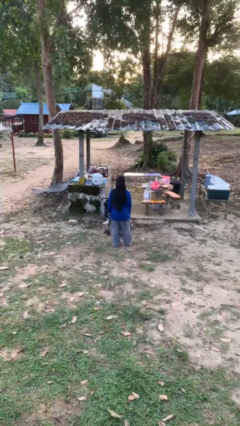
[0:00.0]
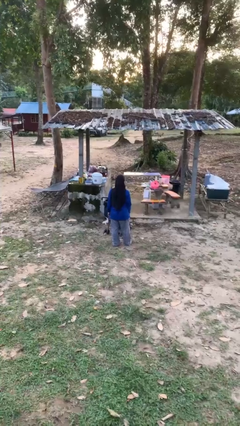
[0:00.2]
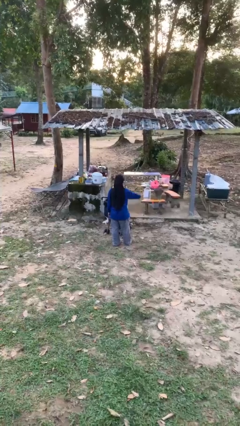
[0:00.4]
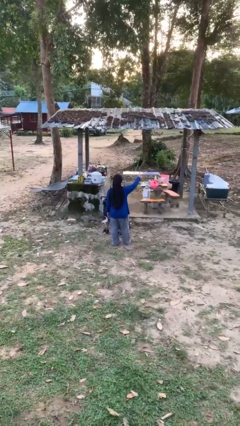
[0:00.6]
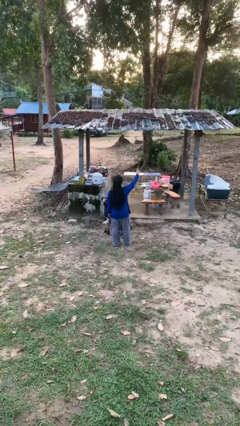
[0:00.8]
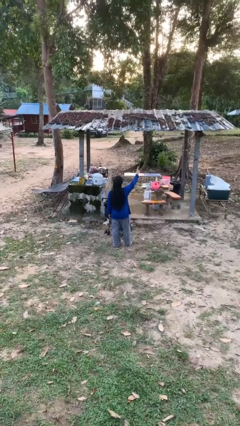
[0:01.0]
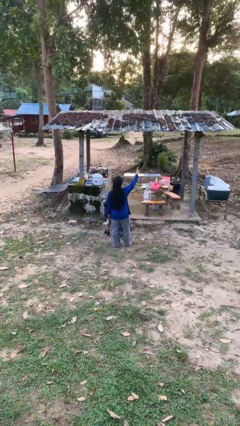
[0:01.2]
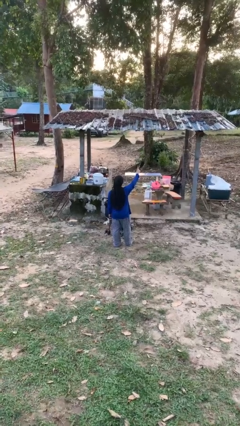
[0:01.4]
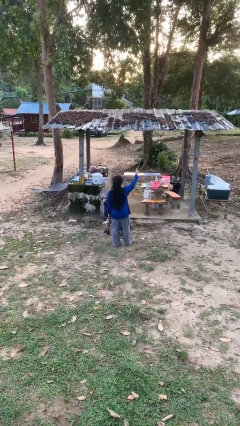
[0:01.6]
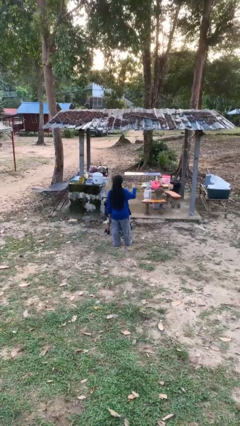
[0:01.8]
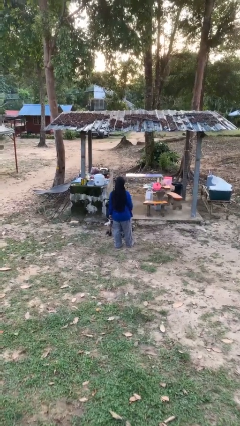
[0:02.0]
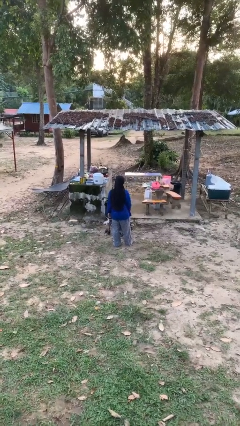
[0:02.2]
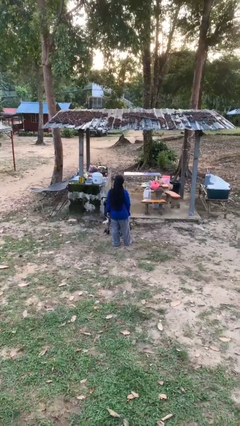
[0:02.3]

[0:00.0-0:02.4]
person gestures number one

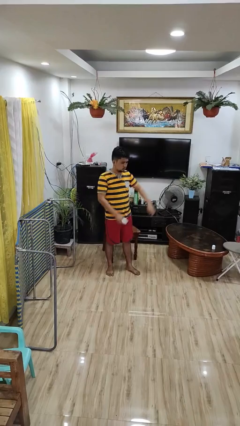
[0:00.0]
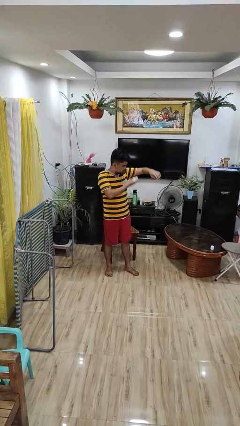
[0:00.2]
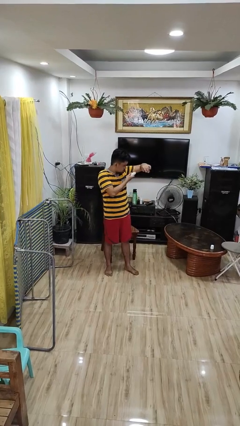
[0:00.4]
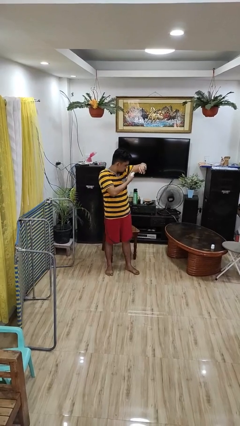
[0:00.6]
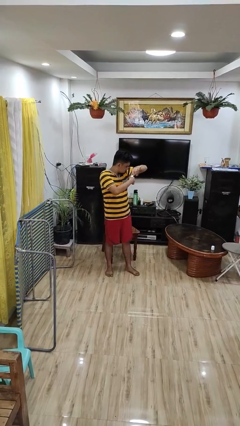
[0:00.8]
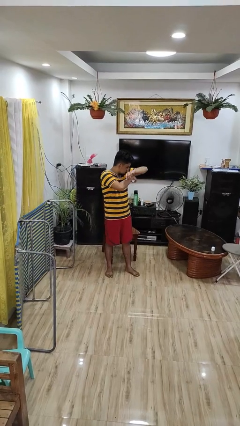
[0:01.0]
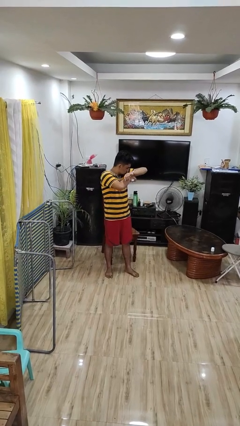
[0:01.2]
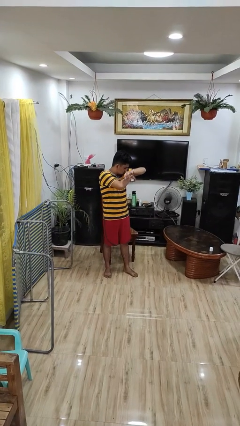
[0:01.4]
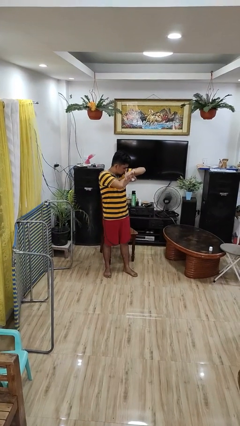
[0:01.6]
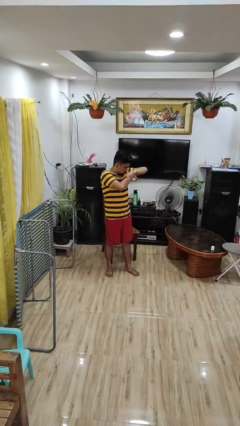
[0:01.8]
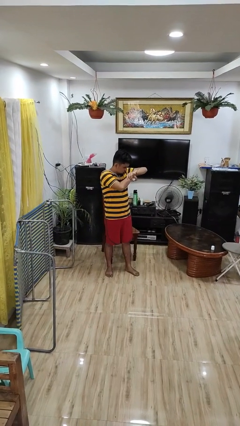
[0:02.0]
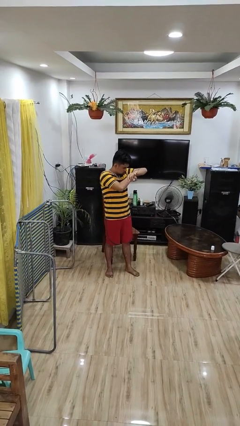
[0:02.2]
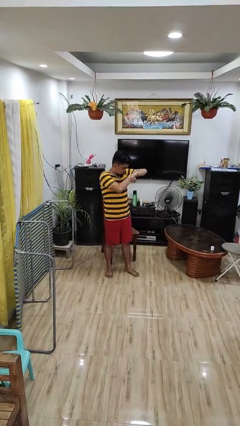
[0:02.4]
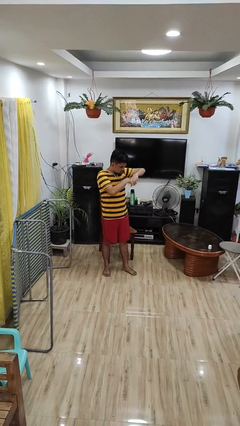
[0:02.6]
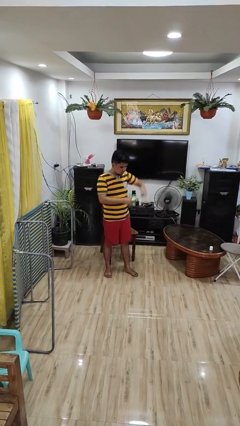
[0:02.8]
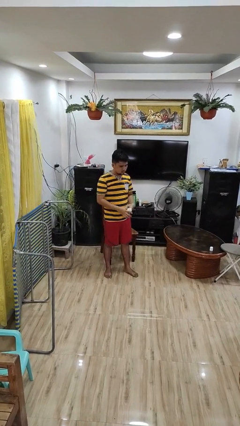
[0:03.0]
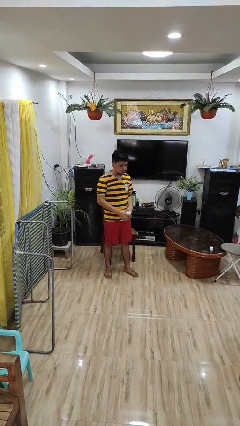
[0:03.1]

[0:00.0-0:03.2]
person applies deodorant

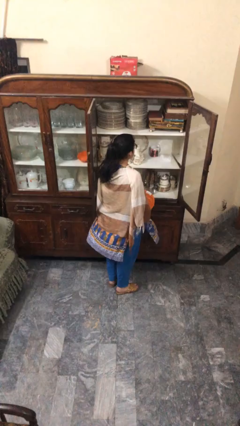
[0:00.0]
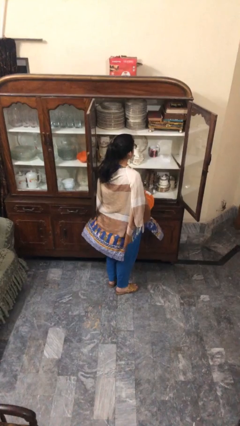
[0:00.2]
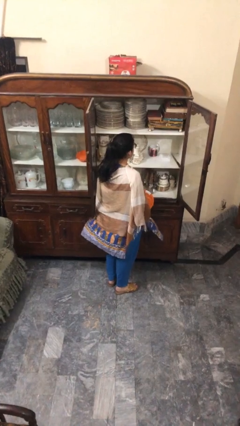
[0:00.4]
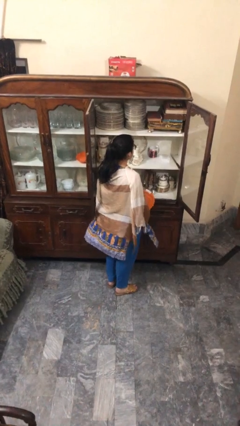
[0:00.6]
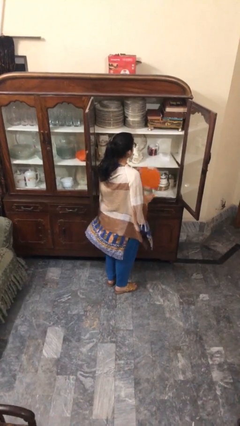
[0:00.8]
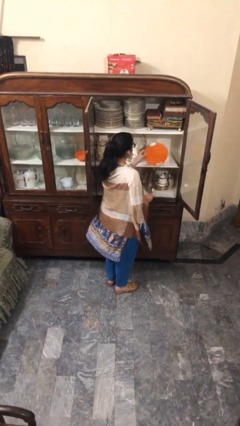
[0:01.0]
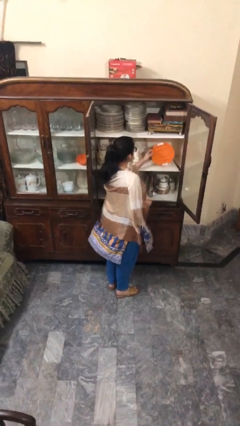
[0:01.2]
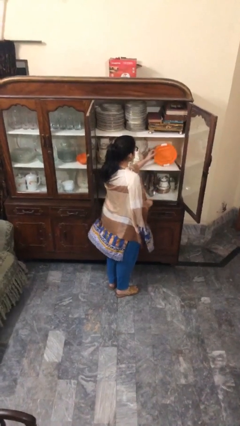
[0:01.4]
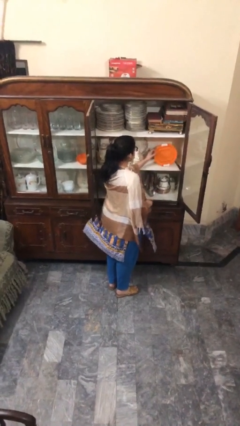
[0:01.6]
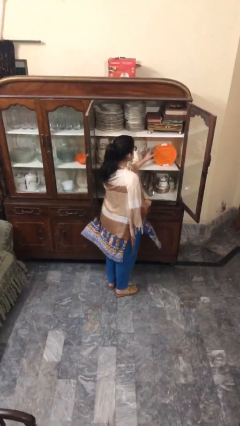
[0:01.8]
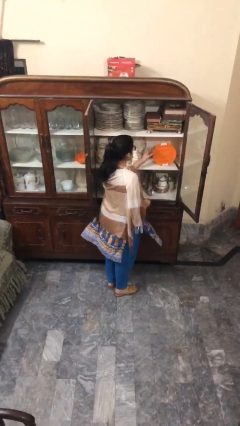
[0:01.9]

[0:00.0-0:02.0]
person puts object in cabinet

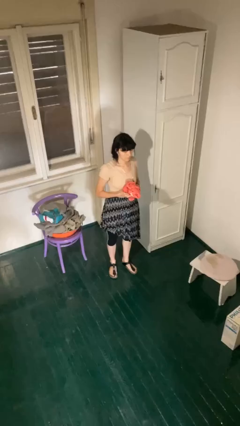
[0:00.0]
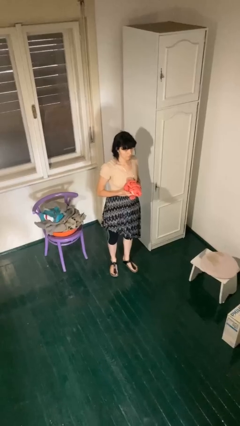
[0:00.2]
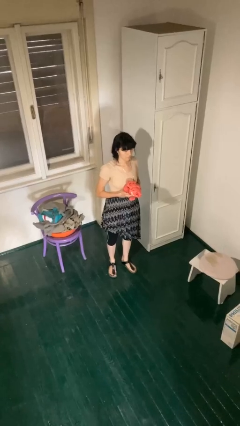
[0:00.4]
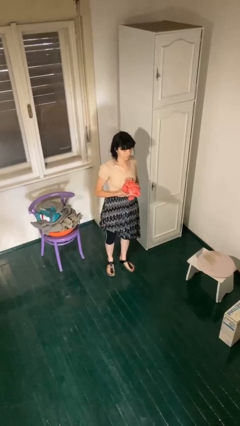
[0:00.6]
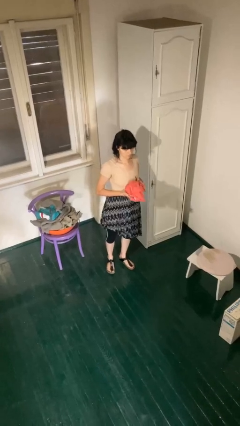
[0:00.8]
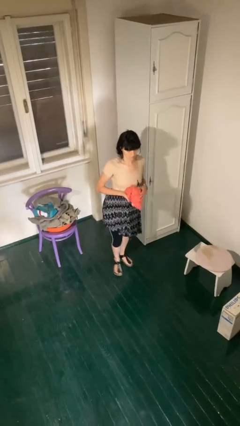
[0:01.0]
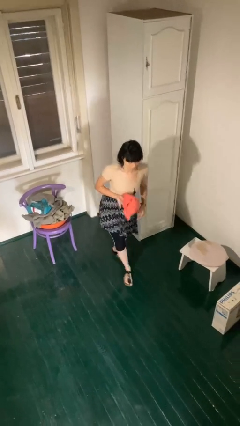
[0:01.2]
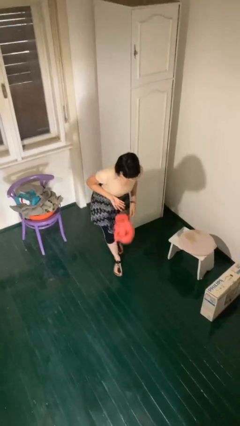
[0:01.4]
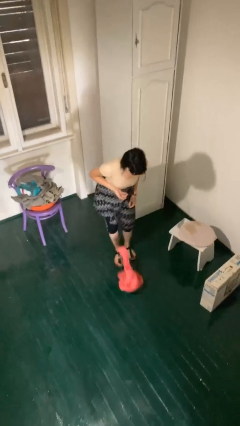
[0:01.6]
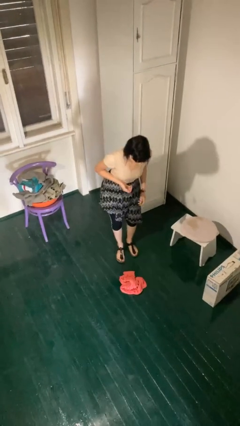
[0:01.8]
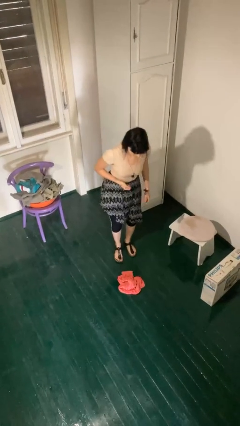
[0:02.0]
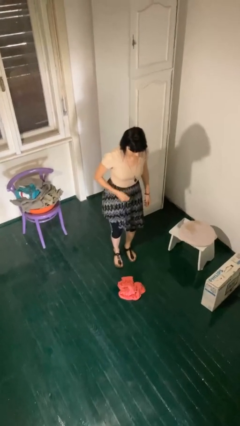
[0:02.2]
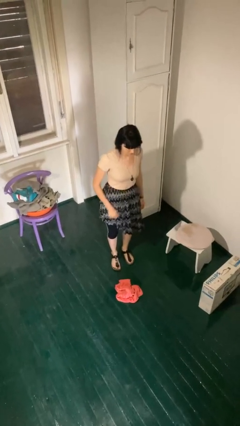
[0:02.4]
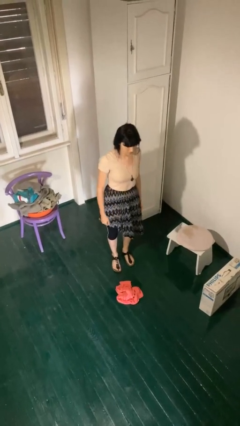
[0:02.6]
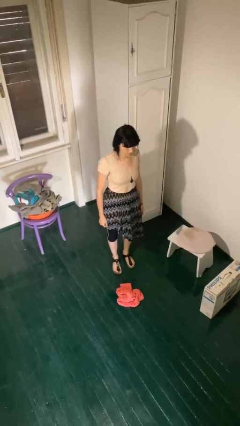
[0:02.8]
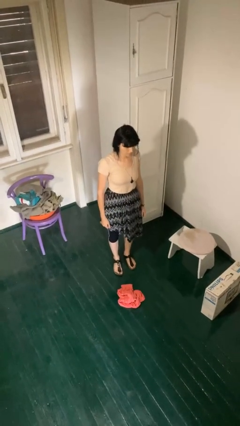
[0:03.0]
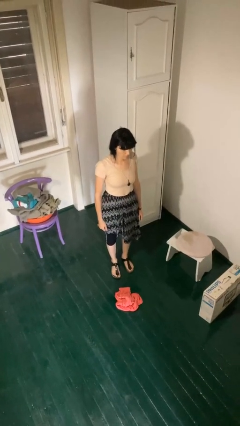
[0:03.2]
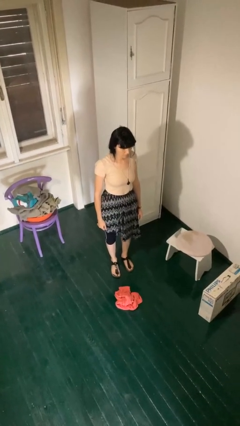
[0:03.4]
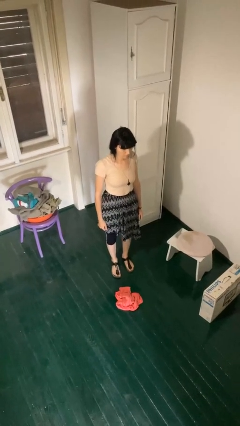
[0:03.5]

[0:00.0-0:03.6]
person drops object

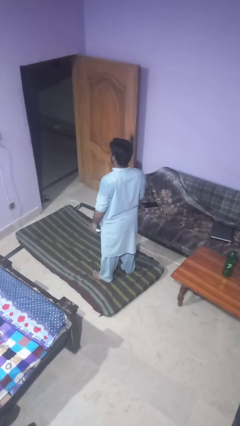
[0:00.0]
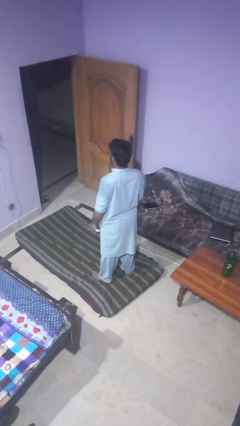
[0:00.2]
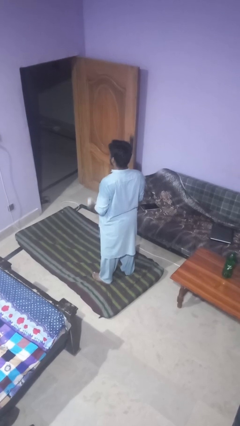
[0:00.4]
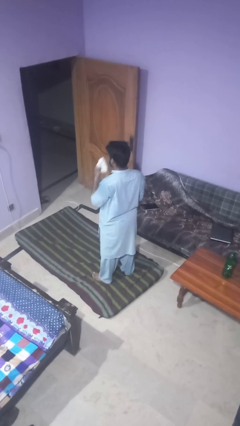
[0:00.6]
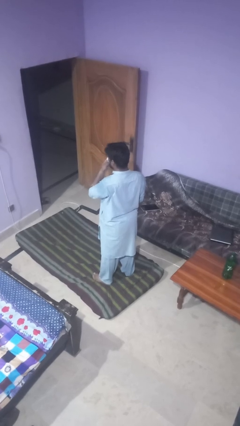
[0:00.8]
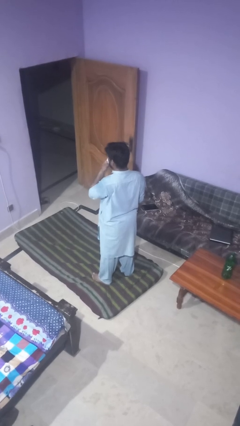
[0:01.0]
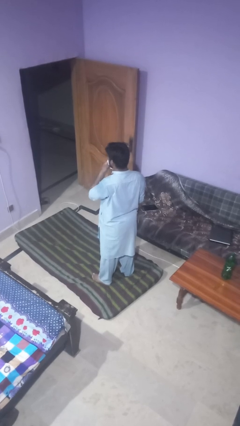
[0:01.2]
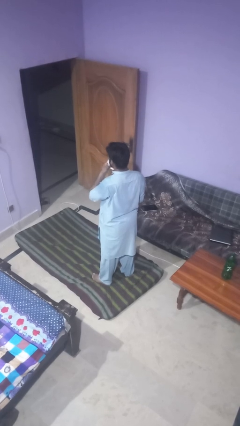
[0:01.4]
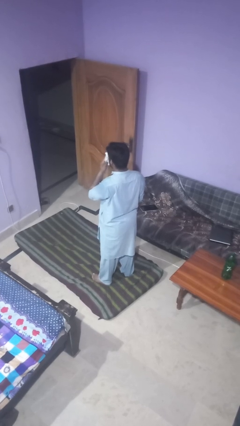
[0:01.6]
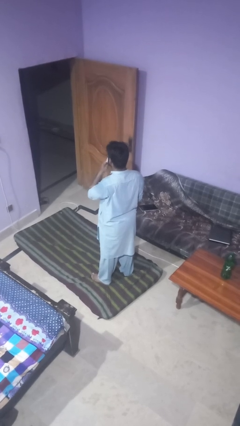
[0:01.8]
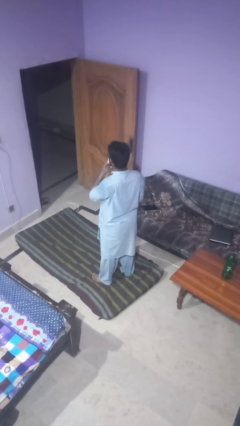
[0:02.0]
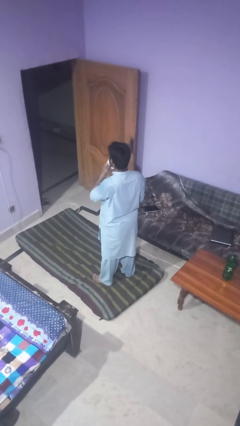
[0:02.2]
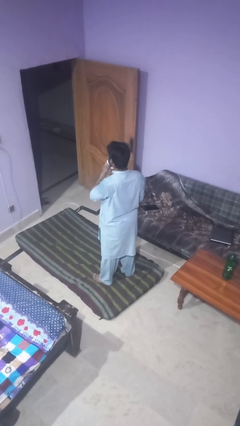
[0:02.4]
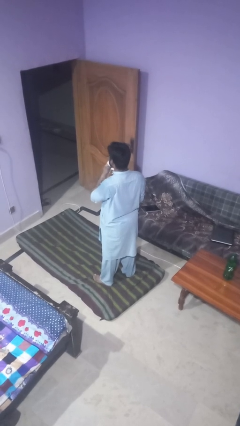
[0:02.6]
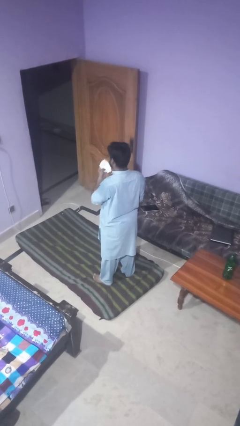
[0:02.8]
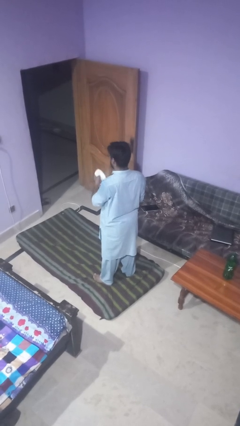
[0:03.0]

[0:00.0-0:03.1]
person wipes mouth with napkin

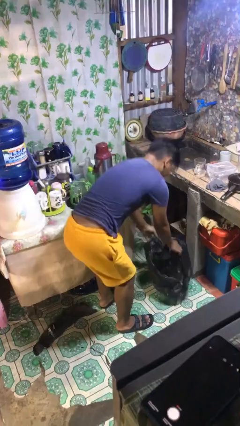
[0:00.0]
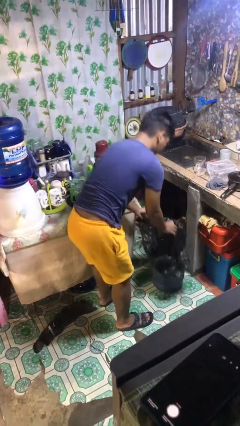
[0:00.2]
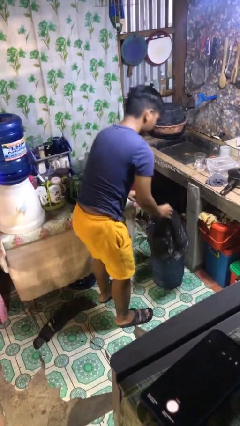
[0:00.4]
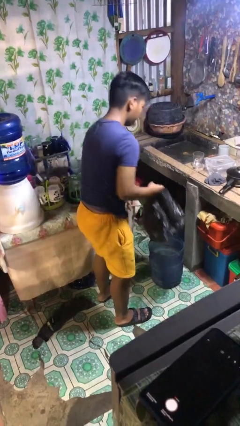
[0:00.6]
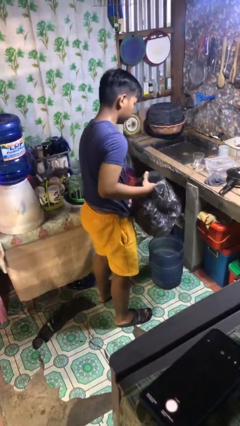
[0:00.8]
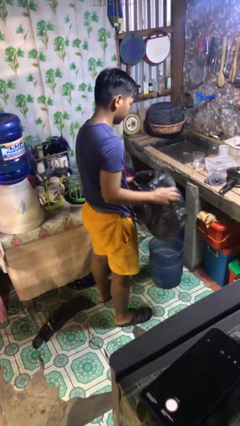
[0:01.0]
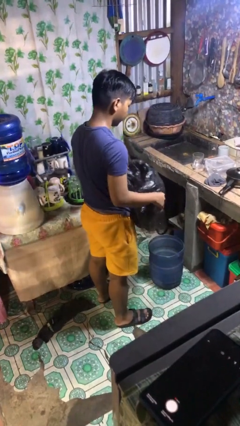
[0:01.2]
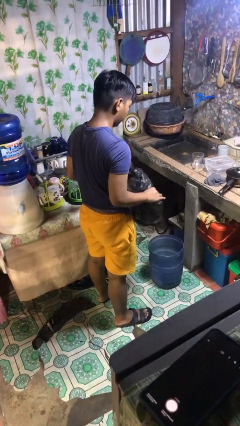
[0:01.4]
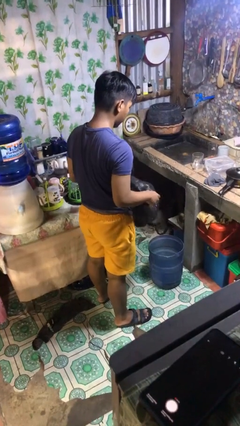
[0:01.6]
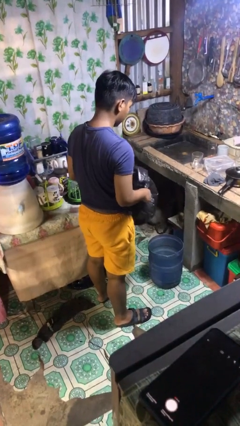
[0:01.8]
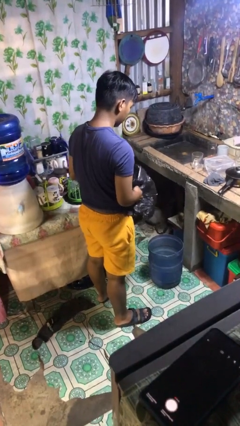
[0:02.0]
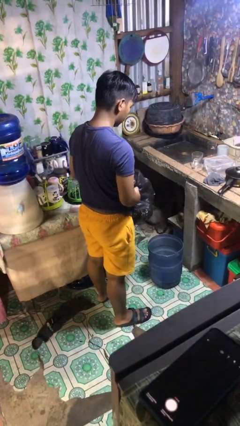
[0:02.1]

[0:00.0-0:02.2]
person removes trashbag from trashcan

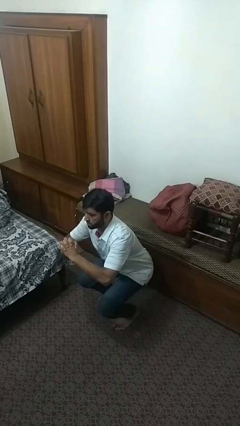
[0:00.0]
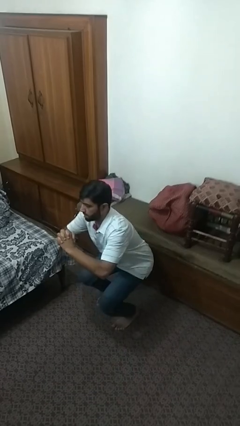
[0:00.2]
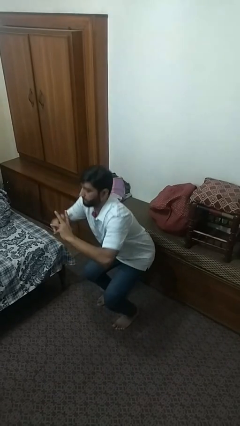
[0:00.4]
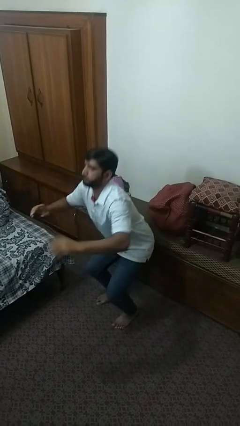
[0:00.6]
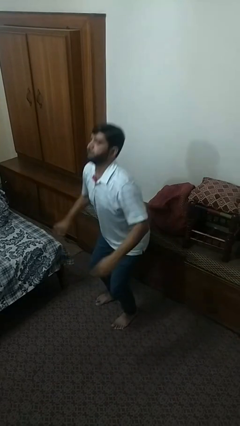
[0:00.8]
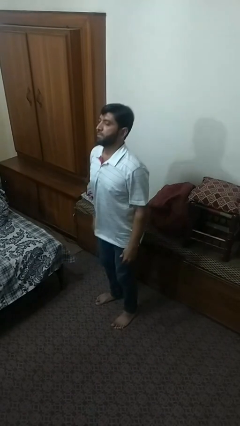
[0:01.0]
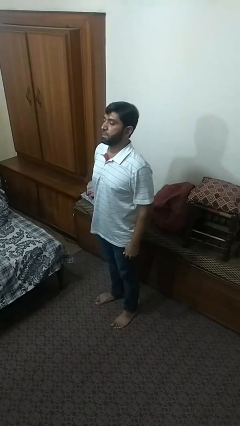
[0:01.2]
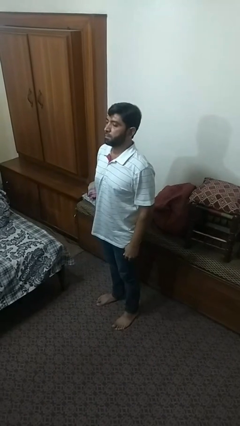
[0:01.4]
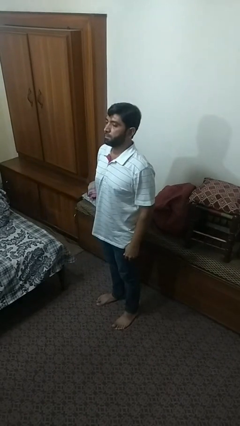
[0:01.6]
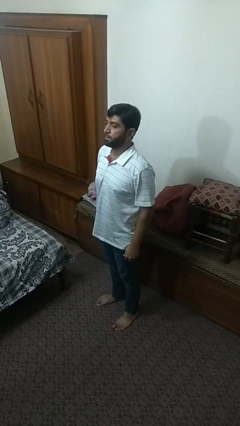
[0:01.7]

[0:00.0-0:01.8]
person stands up
